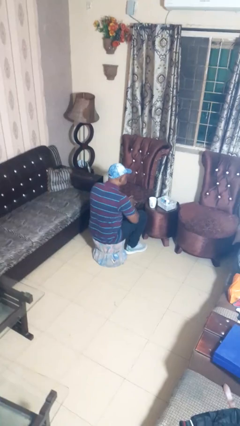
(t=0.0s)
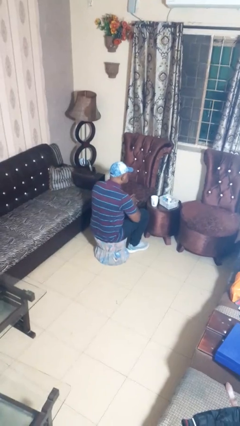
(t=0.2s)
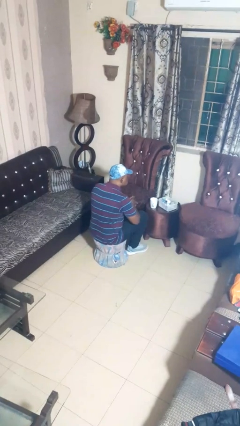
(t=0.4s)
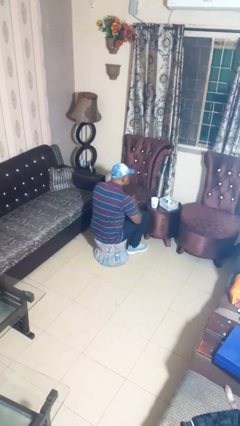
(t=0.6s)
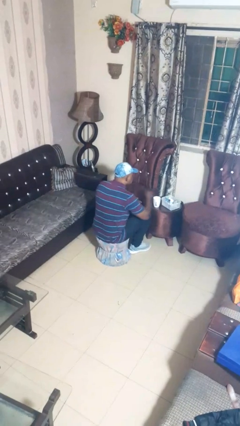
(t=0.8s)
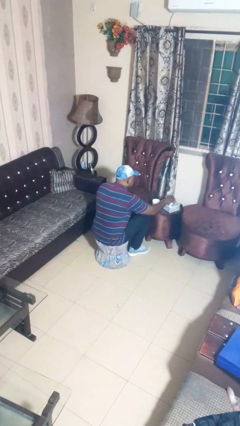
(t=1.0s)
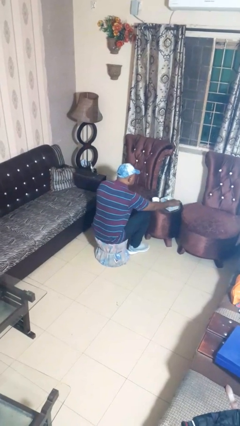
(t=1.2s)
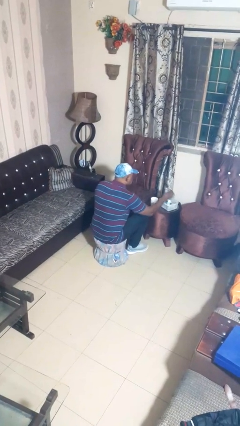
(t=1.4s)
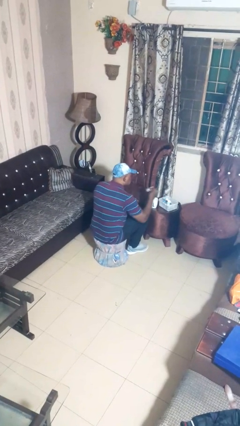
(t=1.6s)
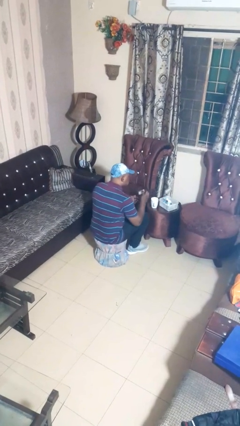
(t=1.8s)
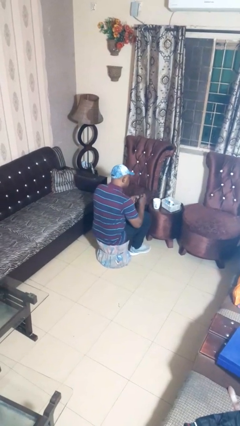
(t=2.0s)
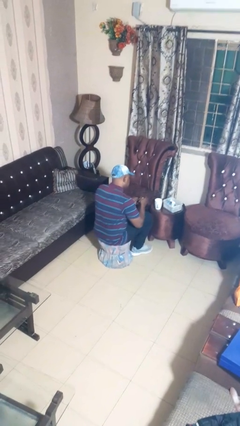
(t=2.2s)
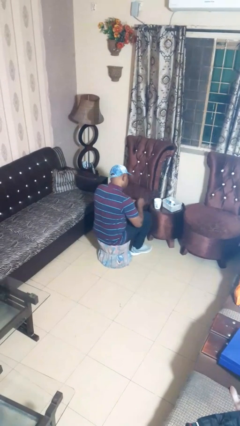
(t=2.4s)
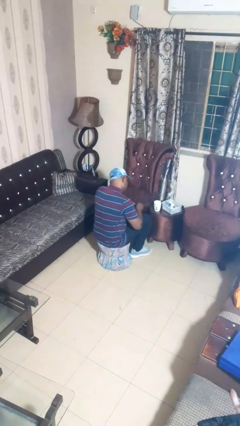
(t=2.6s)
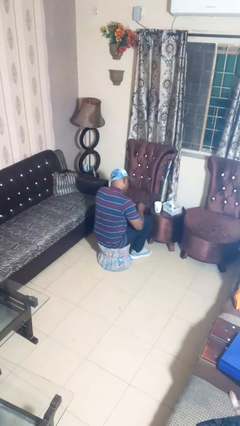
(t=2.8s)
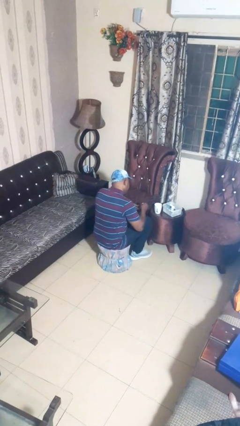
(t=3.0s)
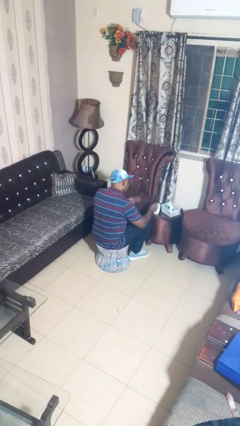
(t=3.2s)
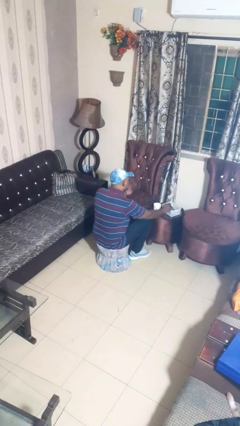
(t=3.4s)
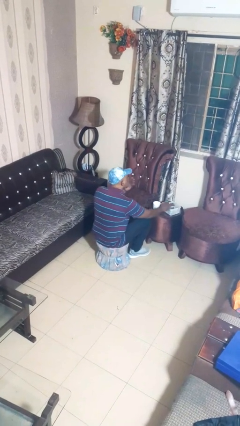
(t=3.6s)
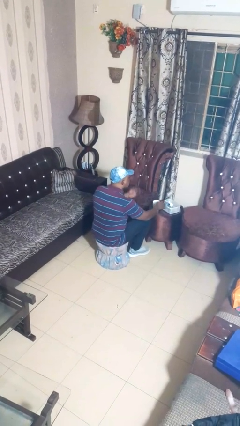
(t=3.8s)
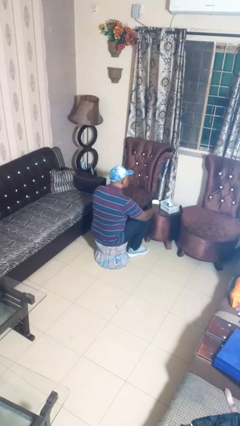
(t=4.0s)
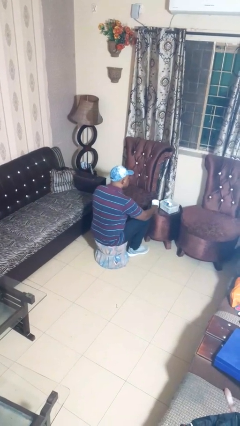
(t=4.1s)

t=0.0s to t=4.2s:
person takes medicine pills

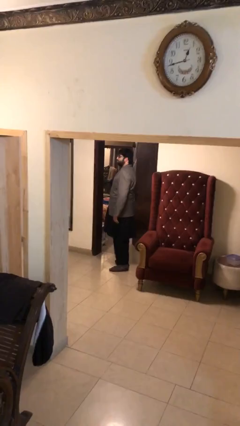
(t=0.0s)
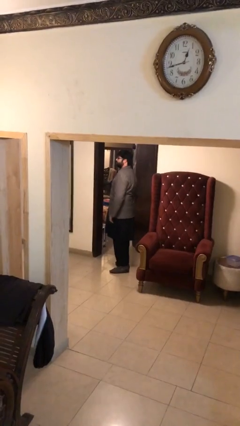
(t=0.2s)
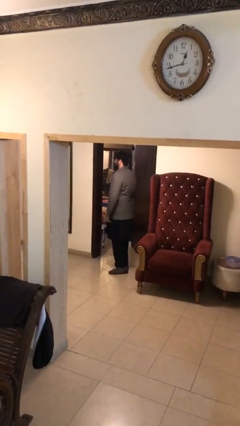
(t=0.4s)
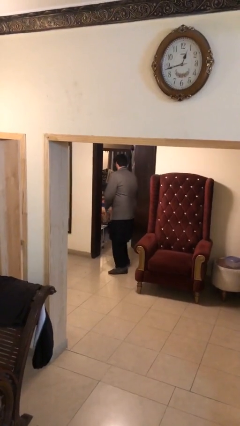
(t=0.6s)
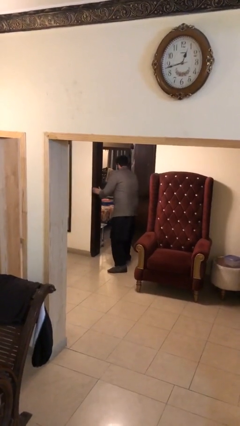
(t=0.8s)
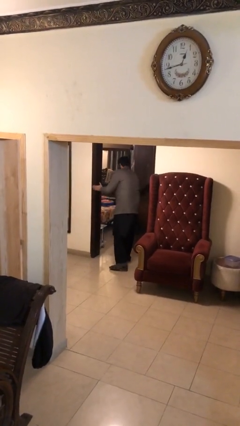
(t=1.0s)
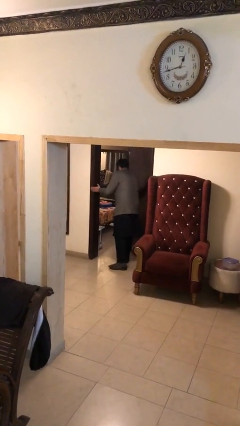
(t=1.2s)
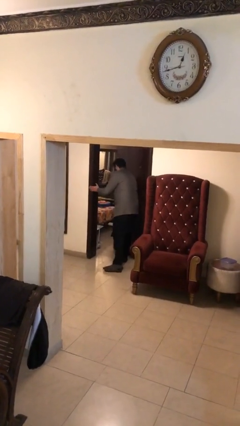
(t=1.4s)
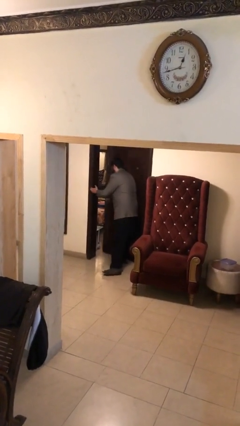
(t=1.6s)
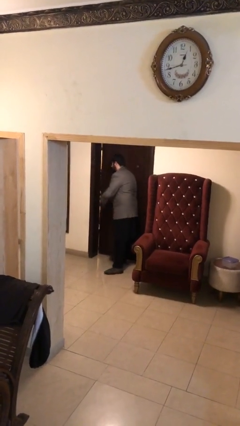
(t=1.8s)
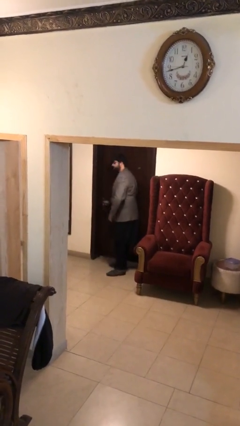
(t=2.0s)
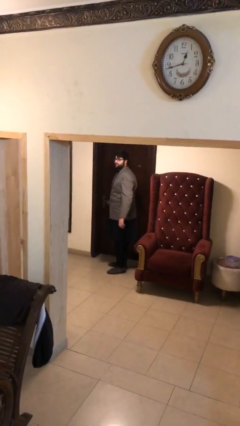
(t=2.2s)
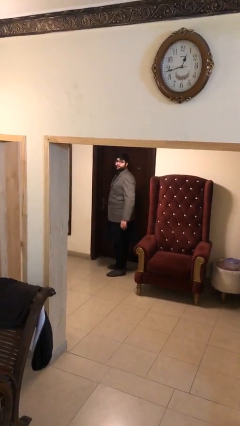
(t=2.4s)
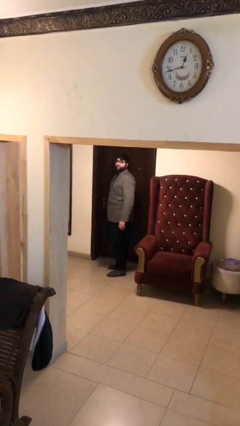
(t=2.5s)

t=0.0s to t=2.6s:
person closes facility door

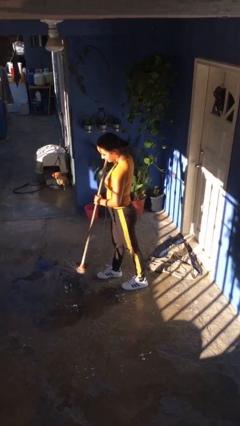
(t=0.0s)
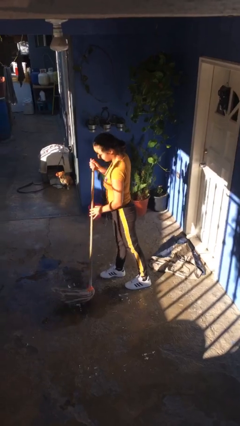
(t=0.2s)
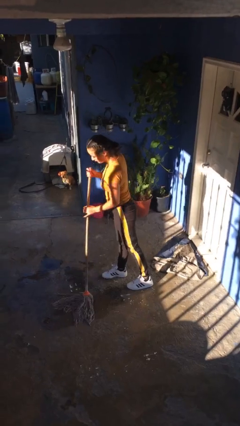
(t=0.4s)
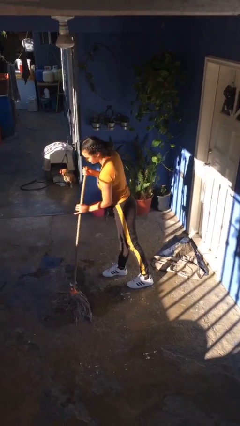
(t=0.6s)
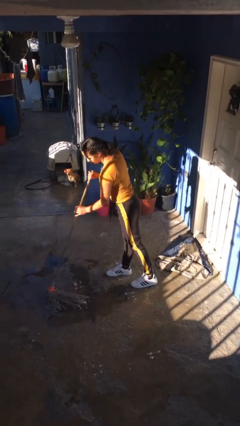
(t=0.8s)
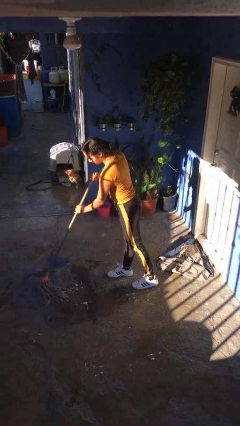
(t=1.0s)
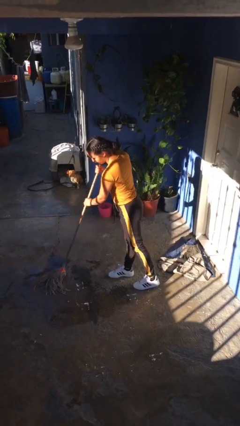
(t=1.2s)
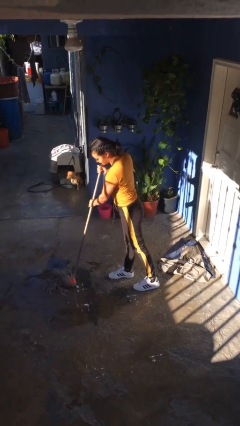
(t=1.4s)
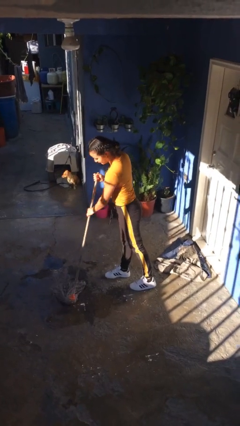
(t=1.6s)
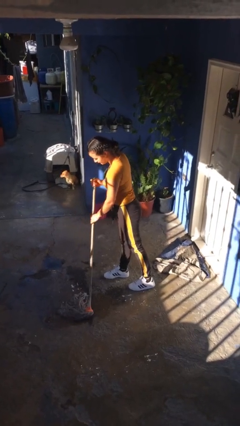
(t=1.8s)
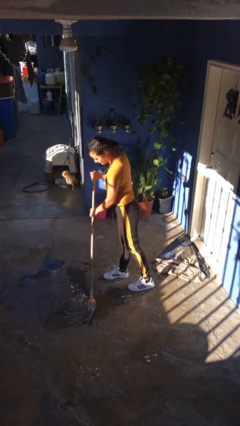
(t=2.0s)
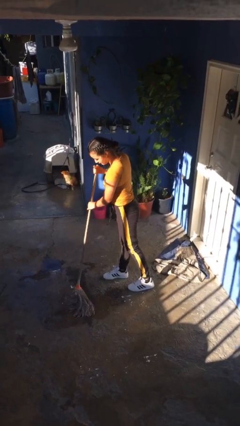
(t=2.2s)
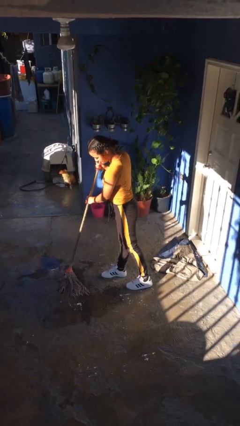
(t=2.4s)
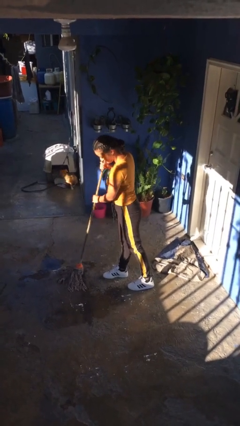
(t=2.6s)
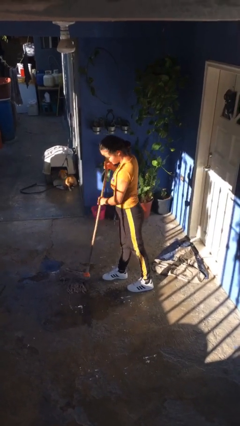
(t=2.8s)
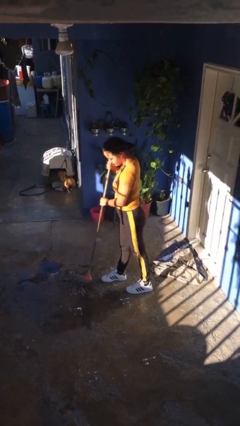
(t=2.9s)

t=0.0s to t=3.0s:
person mops

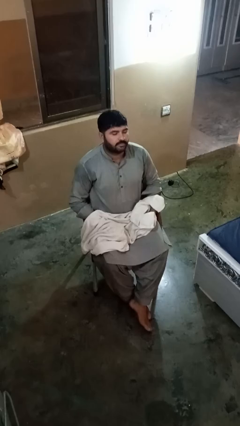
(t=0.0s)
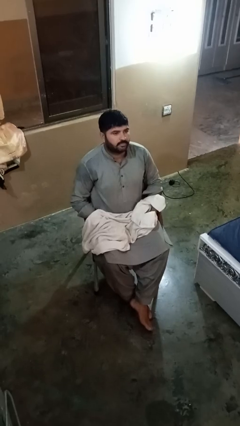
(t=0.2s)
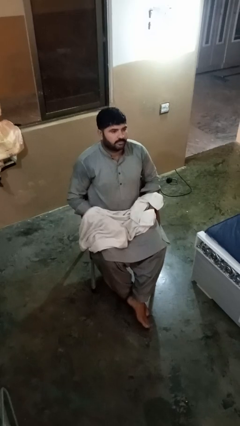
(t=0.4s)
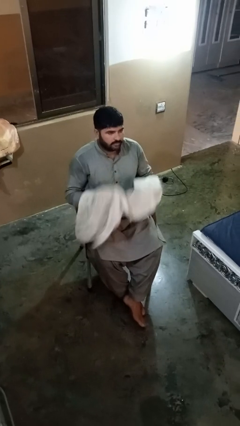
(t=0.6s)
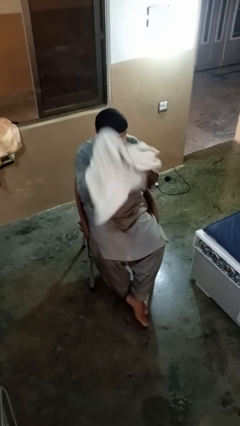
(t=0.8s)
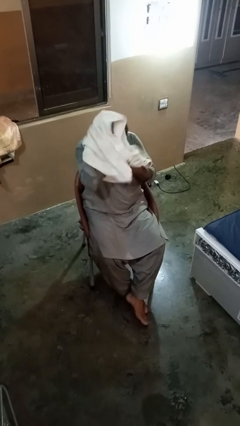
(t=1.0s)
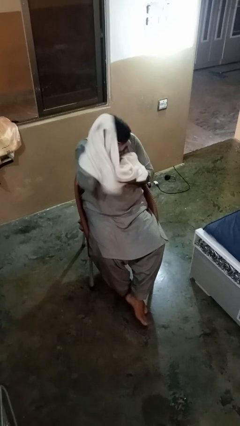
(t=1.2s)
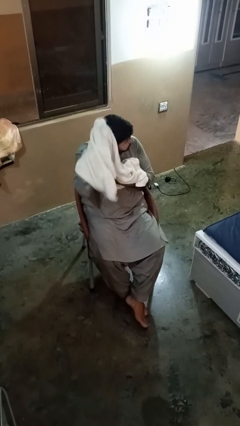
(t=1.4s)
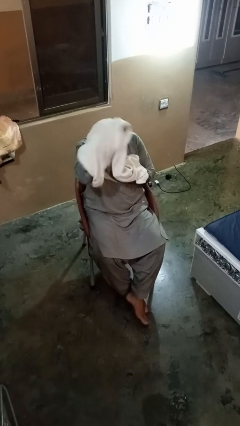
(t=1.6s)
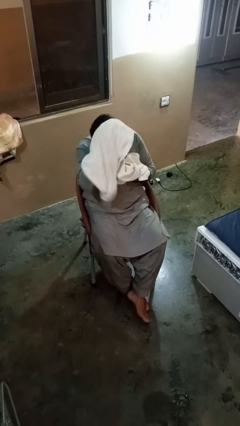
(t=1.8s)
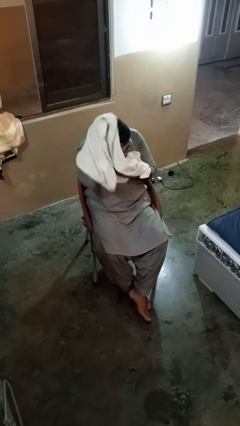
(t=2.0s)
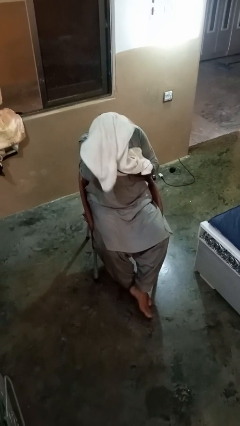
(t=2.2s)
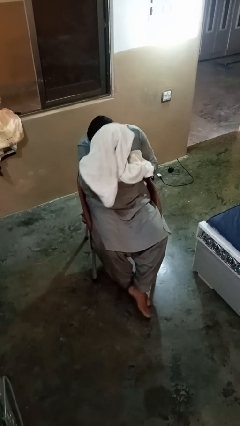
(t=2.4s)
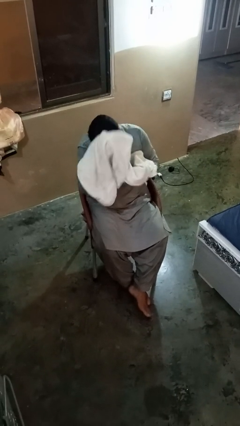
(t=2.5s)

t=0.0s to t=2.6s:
person dries hair with towel

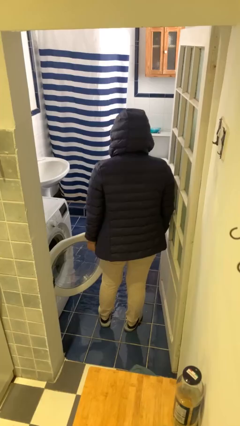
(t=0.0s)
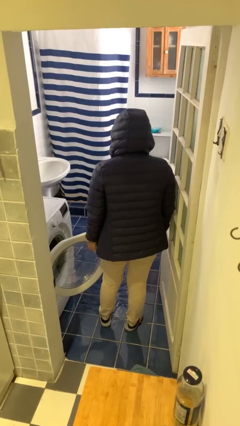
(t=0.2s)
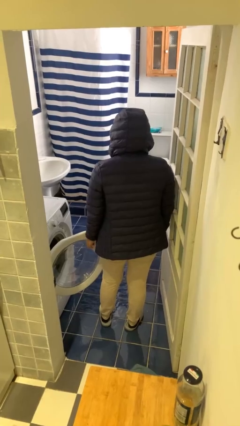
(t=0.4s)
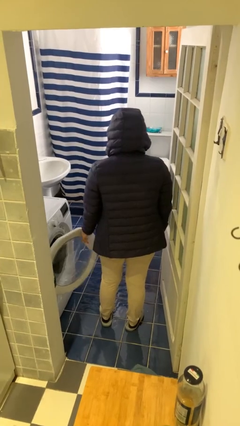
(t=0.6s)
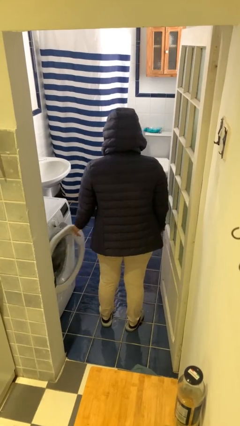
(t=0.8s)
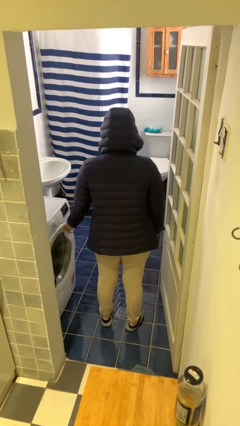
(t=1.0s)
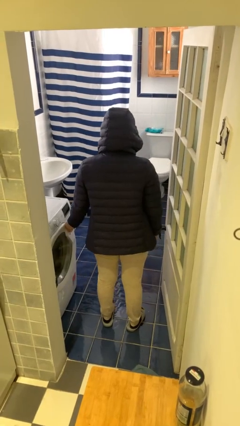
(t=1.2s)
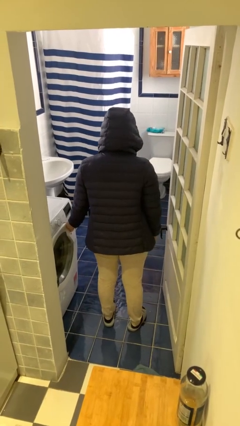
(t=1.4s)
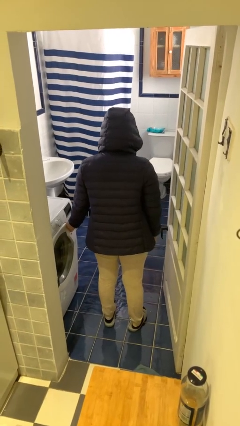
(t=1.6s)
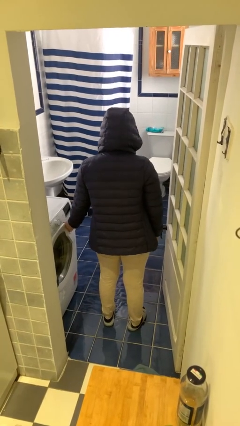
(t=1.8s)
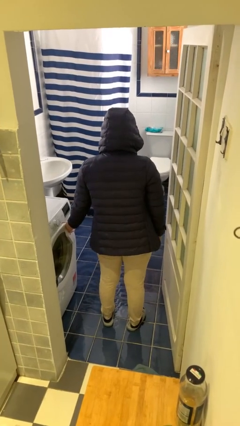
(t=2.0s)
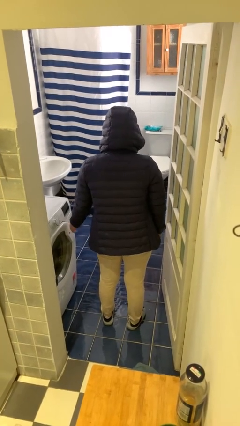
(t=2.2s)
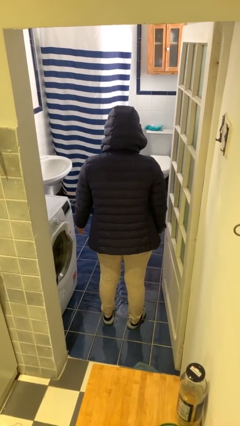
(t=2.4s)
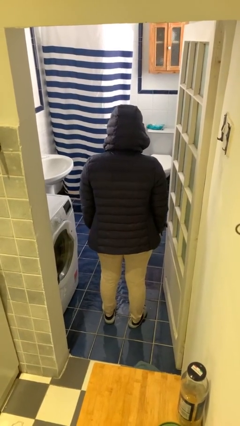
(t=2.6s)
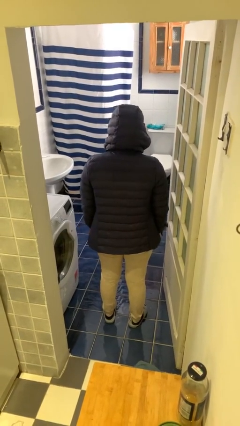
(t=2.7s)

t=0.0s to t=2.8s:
person closes clothes washer

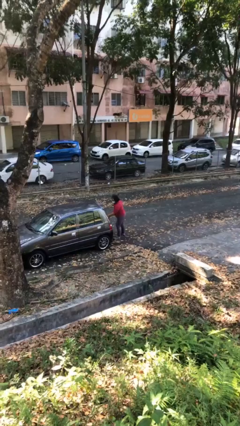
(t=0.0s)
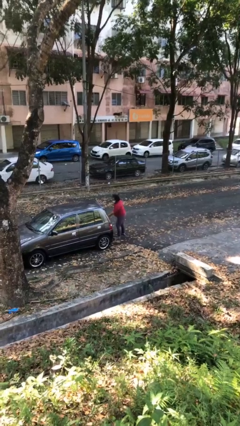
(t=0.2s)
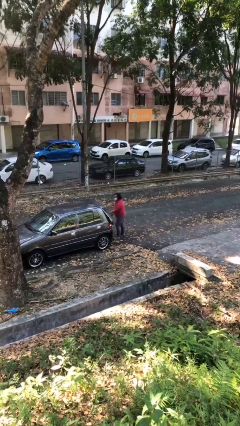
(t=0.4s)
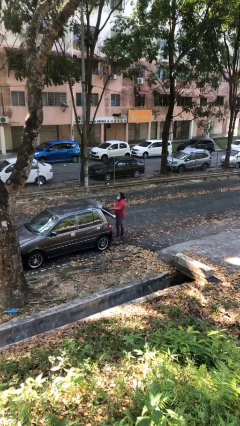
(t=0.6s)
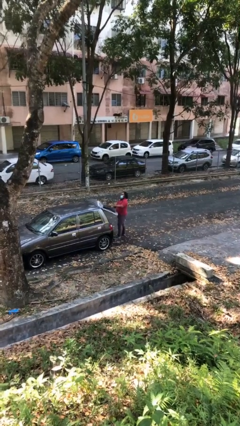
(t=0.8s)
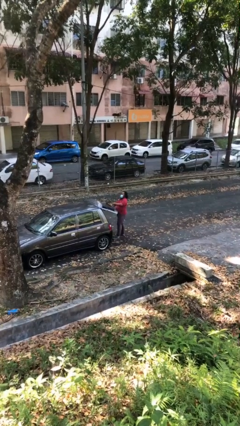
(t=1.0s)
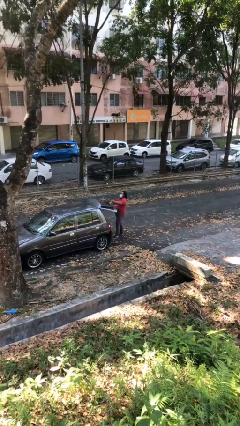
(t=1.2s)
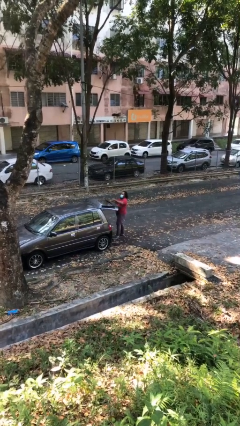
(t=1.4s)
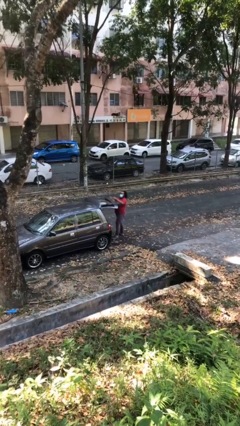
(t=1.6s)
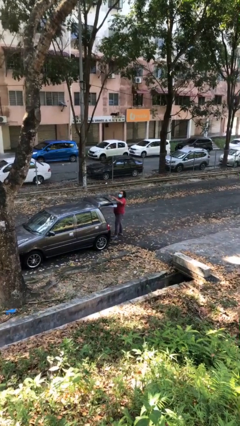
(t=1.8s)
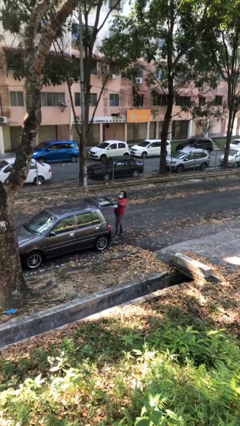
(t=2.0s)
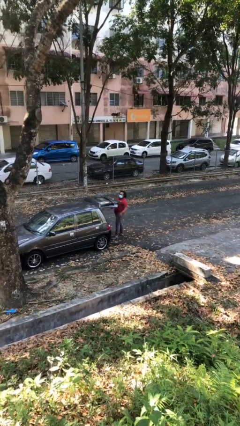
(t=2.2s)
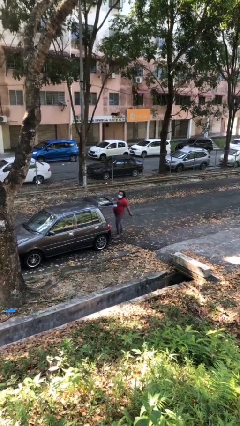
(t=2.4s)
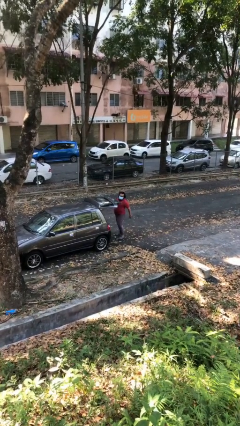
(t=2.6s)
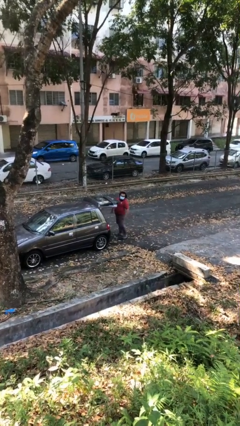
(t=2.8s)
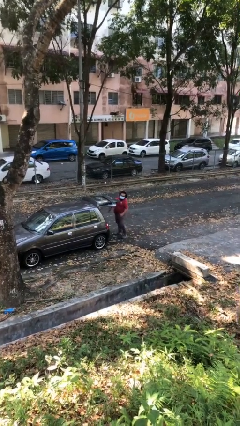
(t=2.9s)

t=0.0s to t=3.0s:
person opens car trunk
